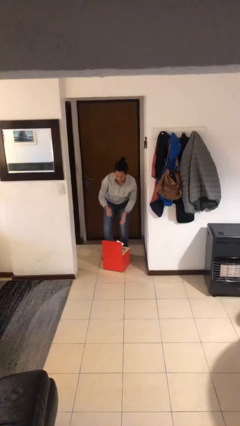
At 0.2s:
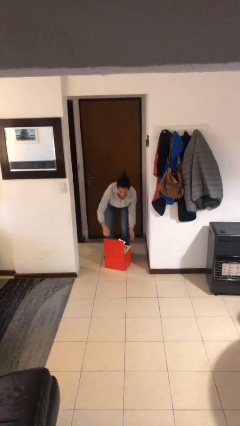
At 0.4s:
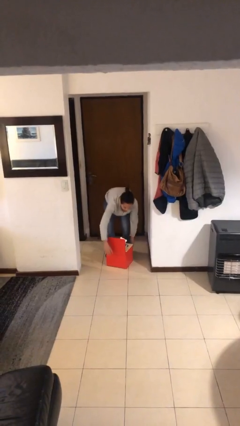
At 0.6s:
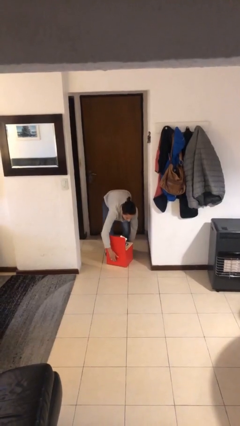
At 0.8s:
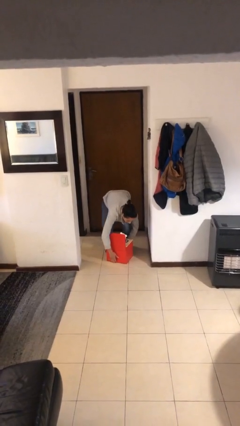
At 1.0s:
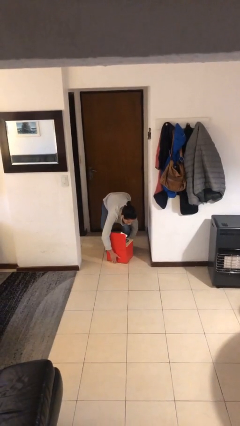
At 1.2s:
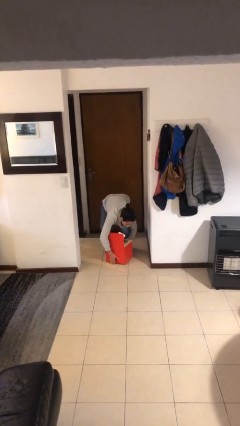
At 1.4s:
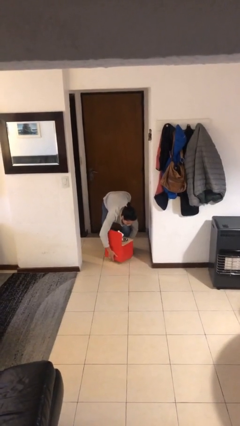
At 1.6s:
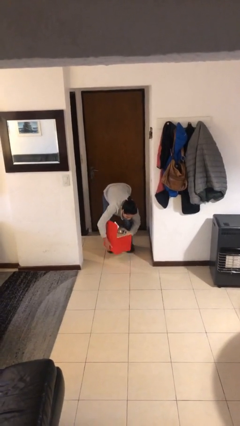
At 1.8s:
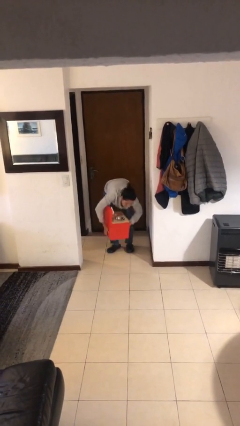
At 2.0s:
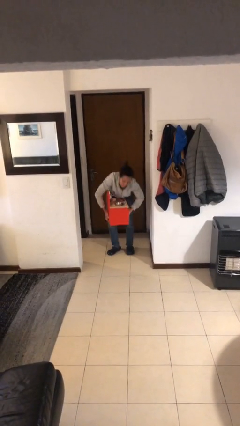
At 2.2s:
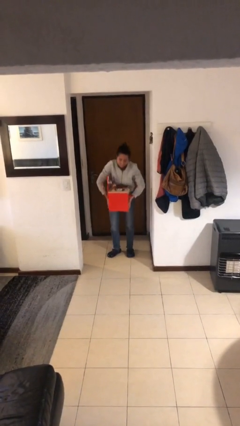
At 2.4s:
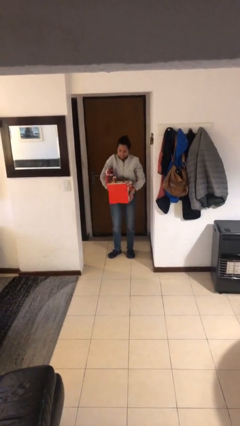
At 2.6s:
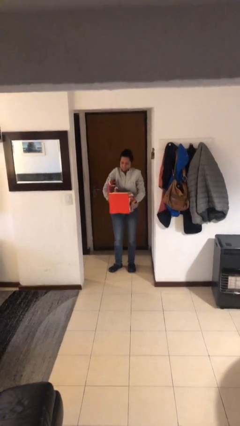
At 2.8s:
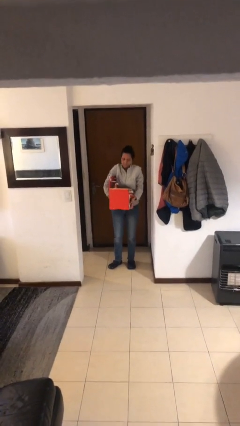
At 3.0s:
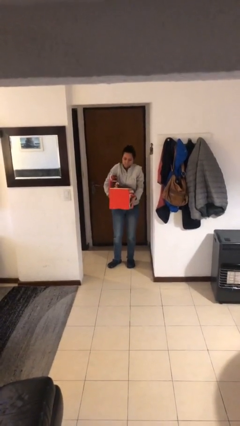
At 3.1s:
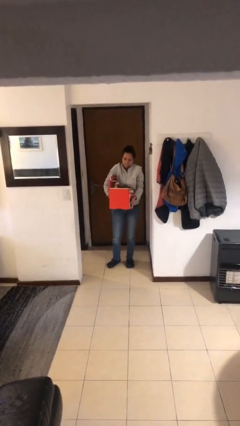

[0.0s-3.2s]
person picks up object from floor

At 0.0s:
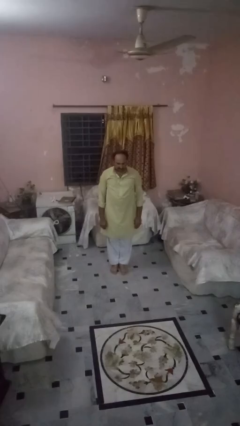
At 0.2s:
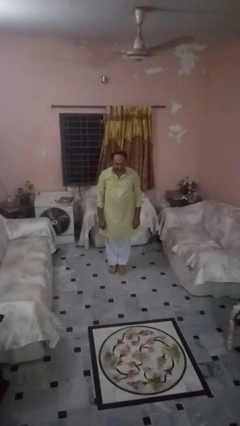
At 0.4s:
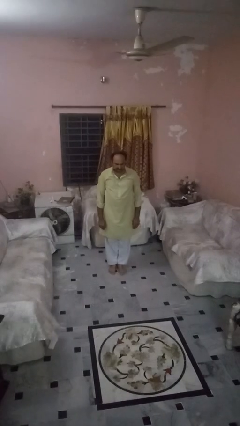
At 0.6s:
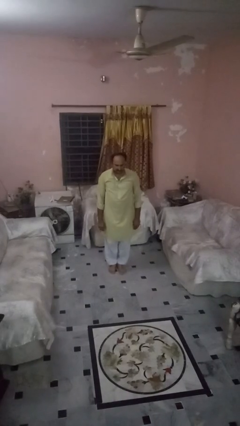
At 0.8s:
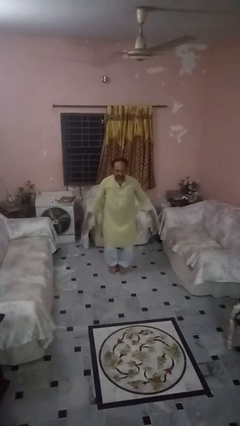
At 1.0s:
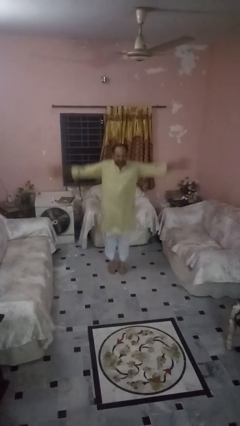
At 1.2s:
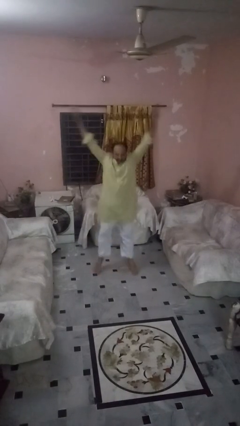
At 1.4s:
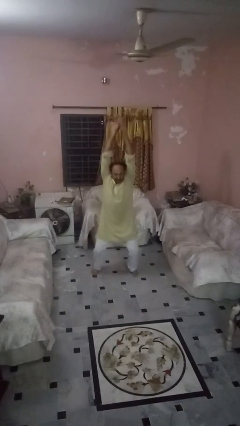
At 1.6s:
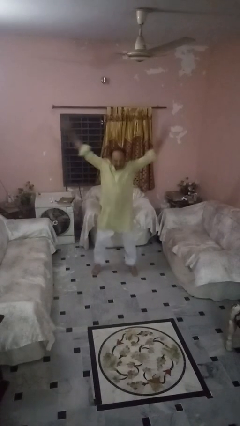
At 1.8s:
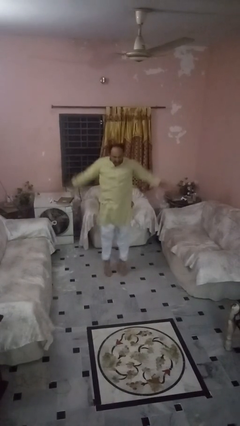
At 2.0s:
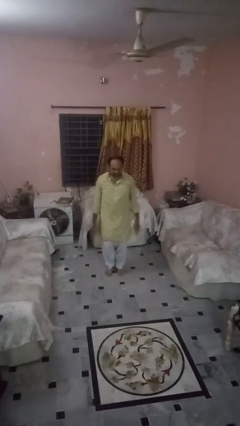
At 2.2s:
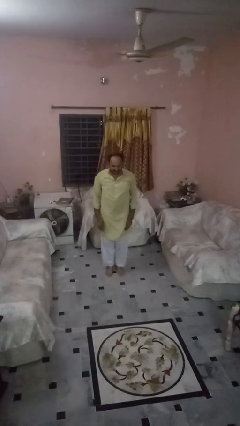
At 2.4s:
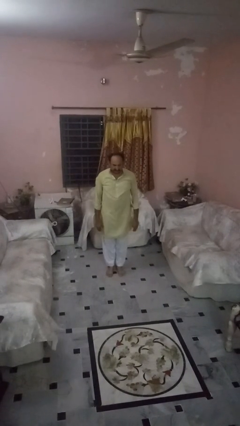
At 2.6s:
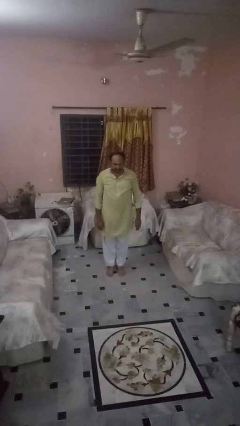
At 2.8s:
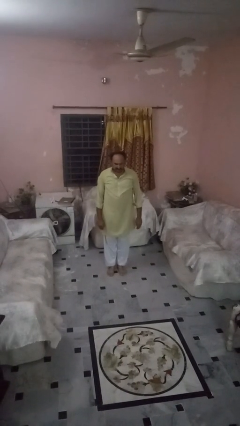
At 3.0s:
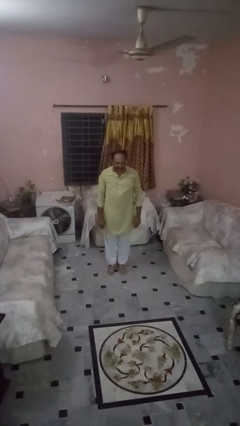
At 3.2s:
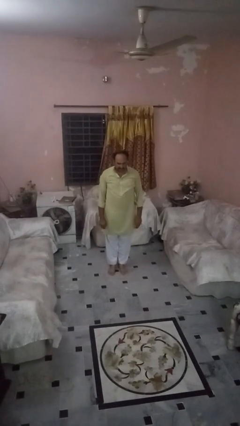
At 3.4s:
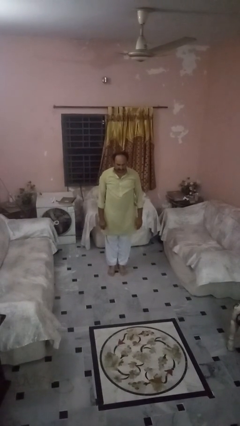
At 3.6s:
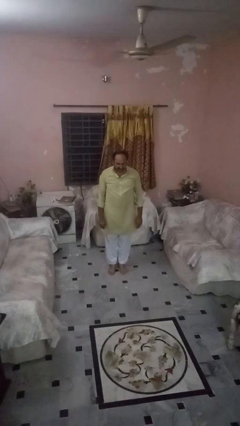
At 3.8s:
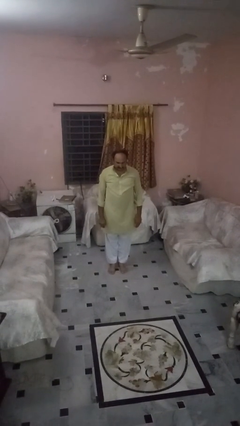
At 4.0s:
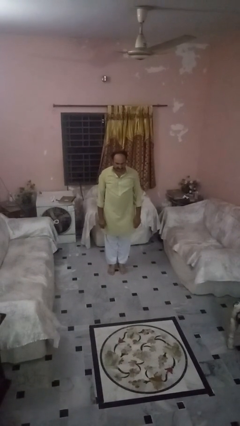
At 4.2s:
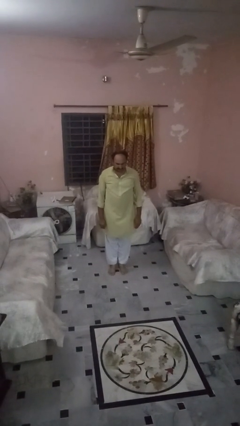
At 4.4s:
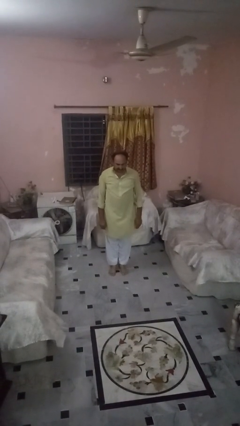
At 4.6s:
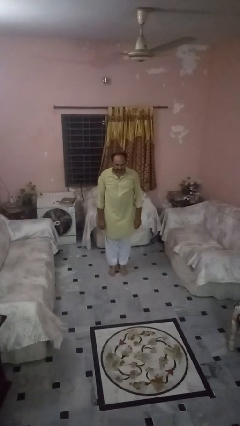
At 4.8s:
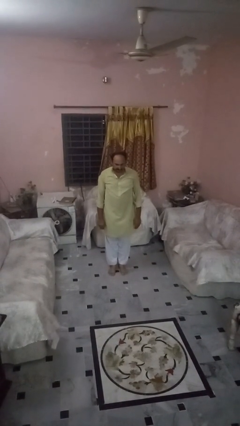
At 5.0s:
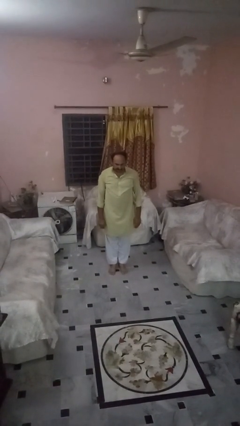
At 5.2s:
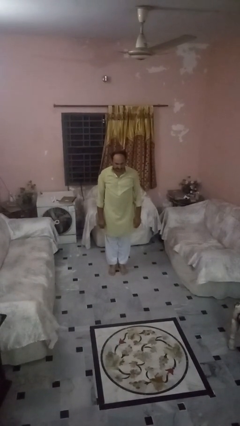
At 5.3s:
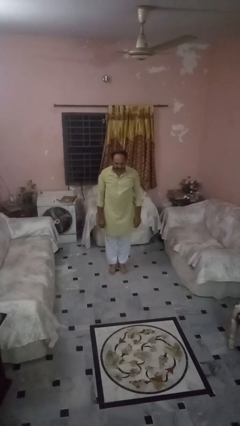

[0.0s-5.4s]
person exercises with jumping jacks

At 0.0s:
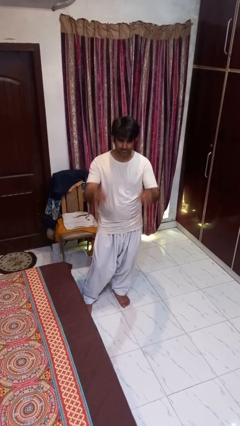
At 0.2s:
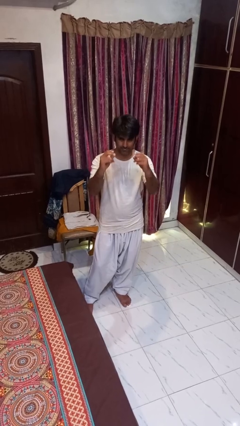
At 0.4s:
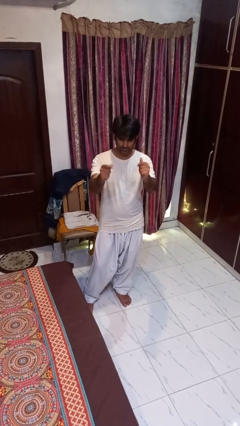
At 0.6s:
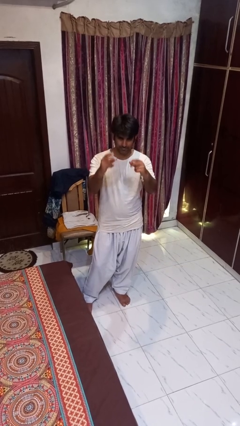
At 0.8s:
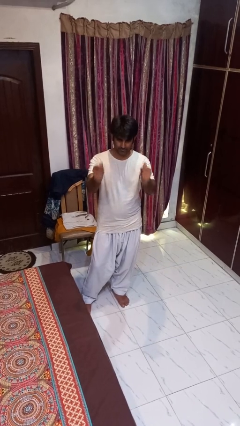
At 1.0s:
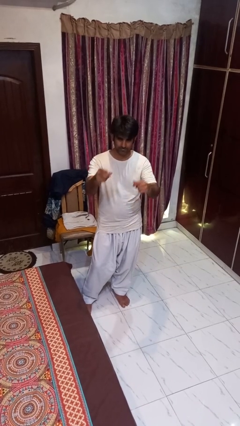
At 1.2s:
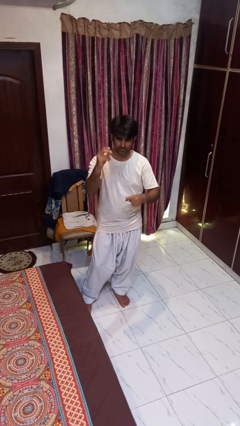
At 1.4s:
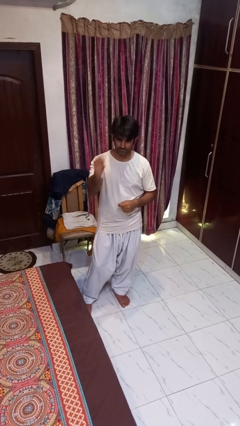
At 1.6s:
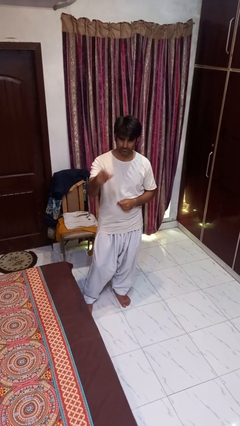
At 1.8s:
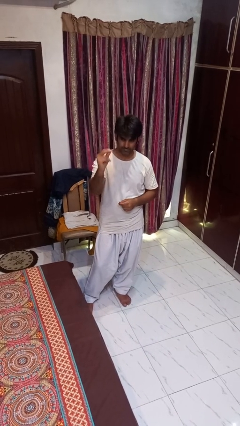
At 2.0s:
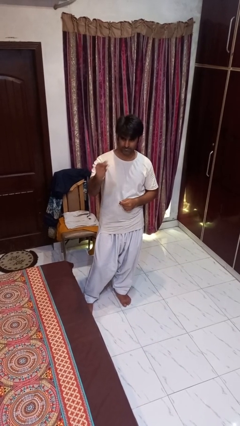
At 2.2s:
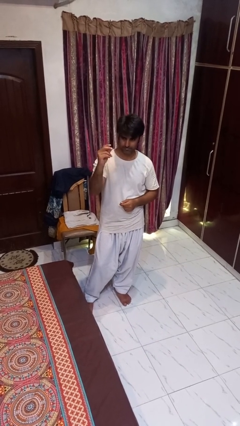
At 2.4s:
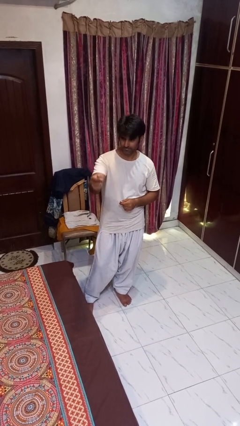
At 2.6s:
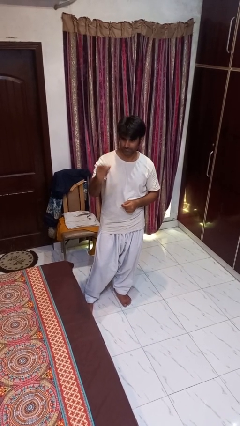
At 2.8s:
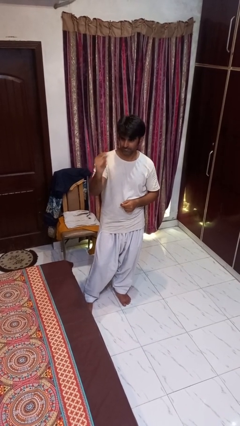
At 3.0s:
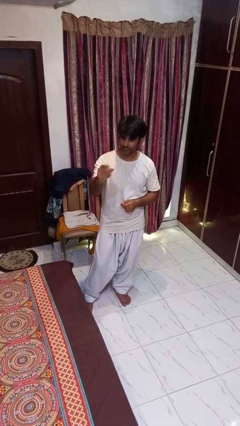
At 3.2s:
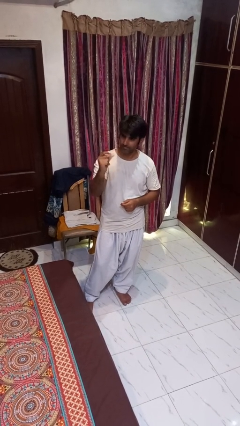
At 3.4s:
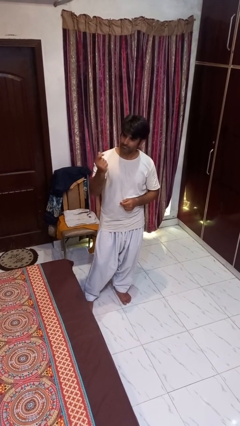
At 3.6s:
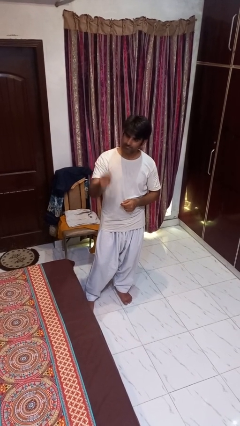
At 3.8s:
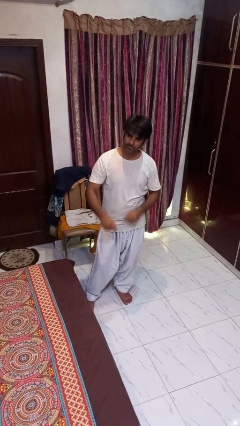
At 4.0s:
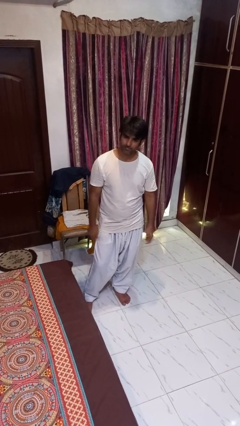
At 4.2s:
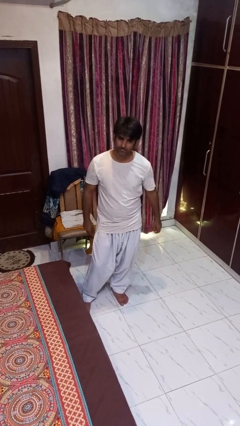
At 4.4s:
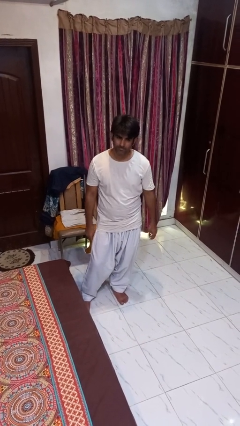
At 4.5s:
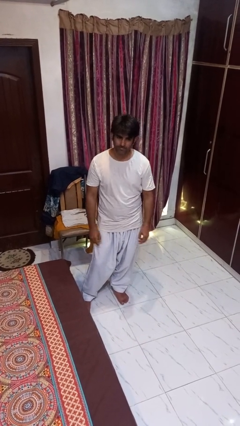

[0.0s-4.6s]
person snaps fingers

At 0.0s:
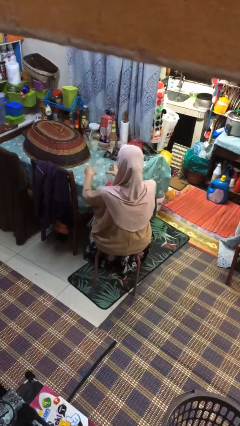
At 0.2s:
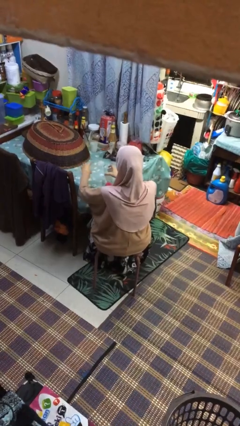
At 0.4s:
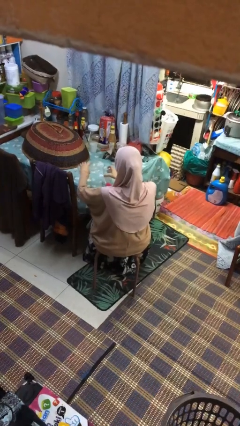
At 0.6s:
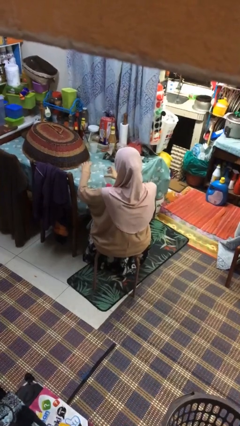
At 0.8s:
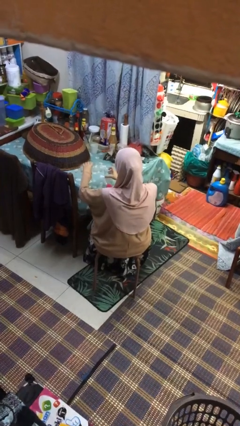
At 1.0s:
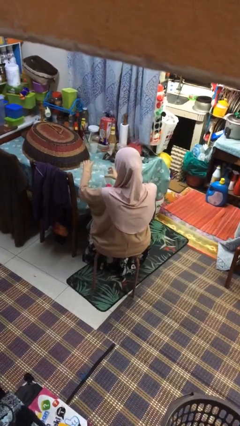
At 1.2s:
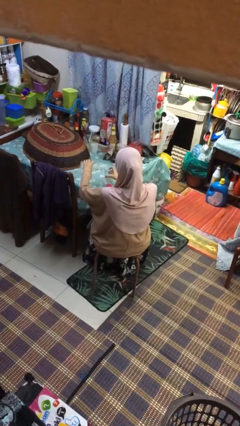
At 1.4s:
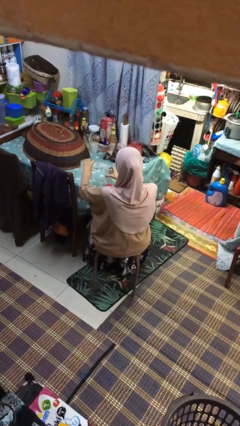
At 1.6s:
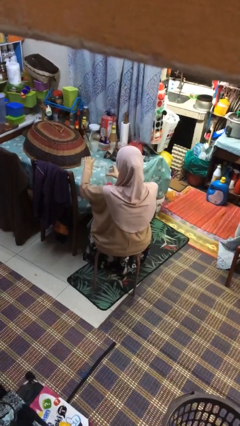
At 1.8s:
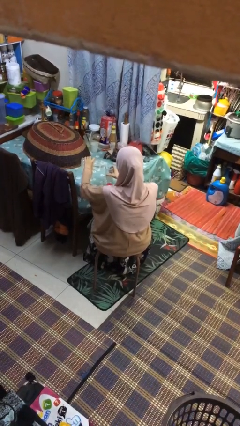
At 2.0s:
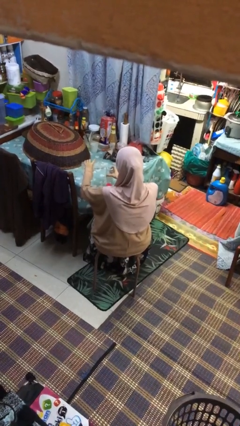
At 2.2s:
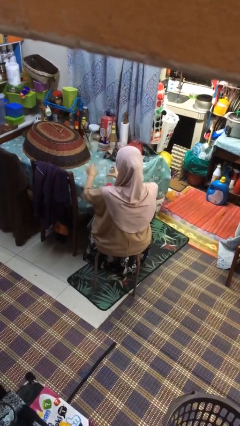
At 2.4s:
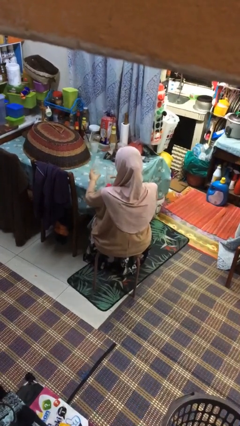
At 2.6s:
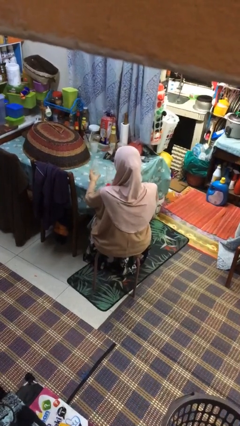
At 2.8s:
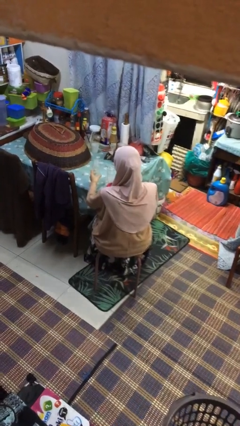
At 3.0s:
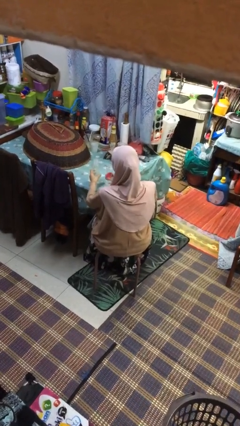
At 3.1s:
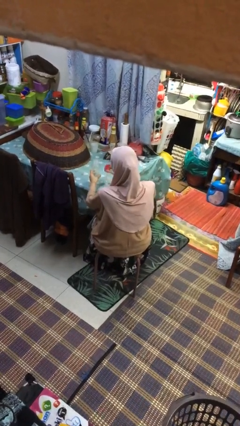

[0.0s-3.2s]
person pours liquid into cup

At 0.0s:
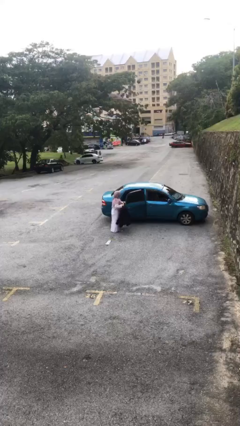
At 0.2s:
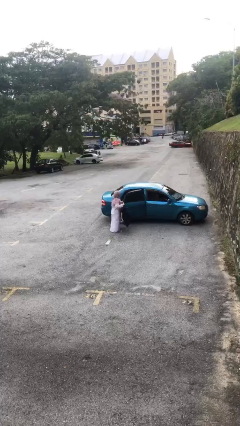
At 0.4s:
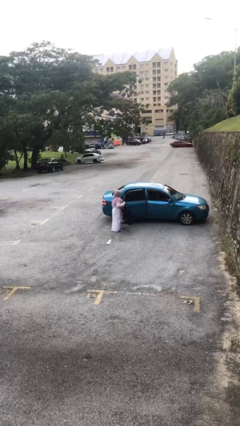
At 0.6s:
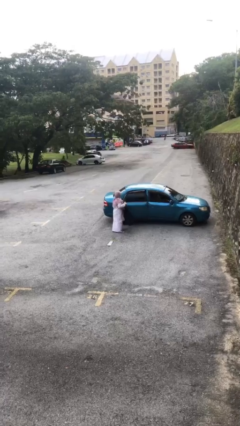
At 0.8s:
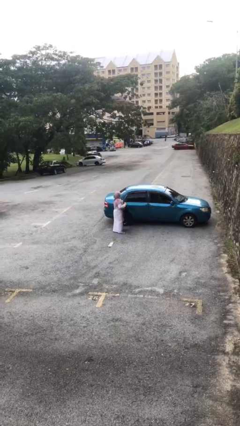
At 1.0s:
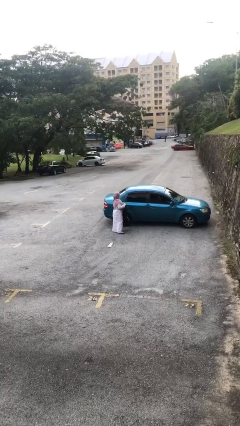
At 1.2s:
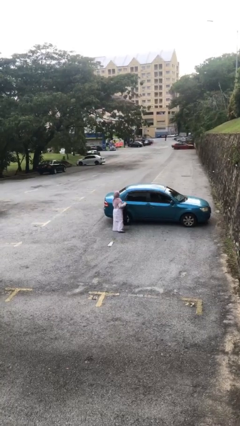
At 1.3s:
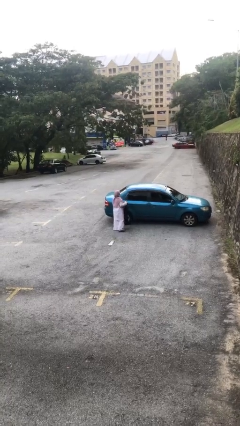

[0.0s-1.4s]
person closes car door

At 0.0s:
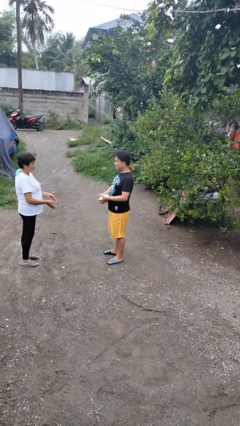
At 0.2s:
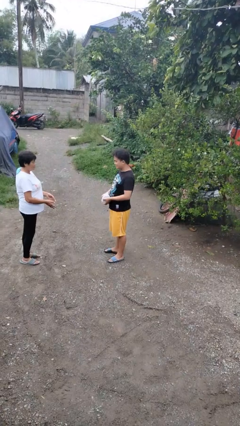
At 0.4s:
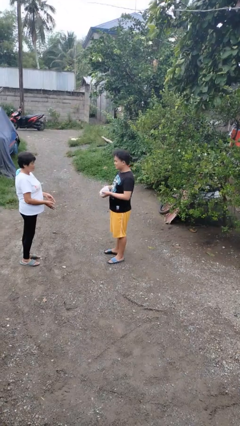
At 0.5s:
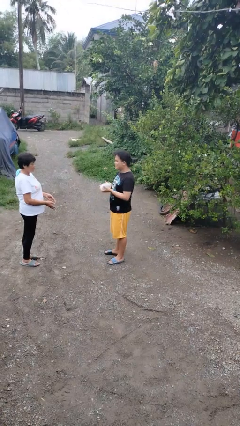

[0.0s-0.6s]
person catches object from person
